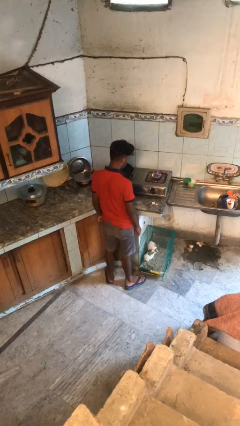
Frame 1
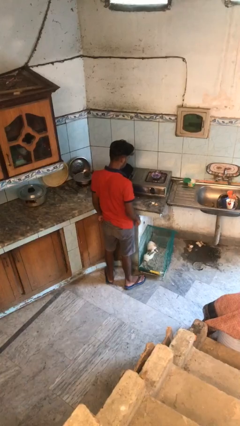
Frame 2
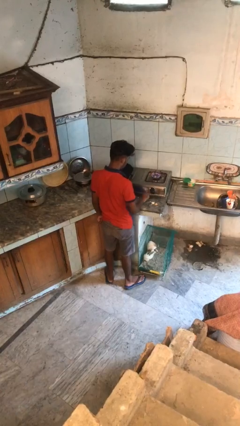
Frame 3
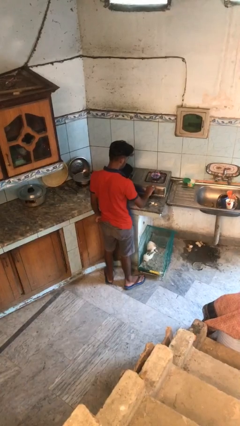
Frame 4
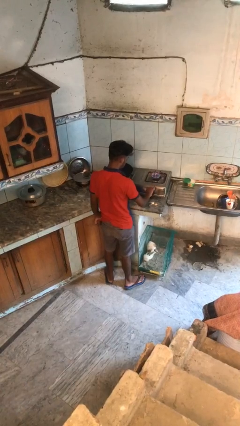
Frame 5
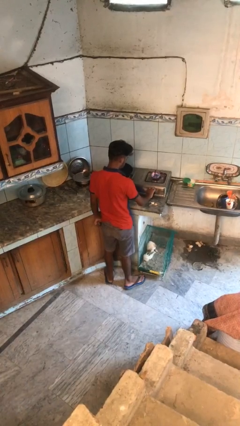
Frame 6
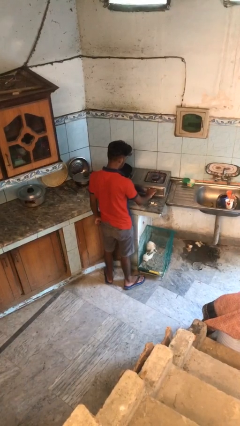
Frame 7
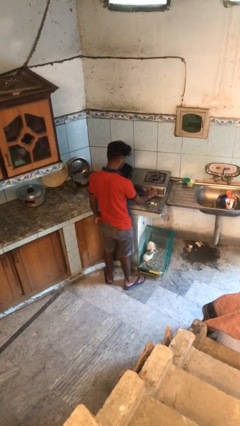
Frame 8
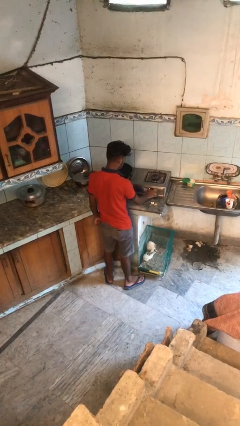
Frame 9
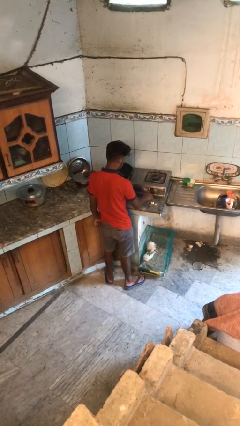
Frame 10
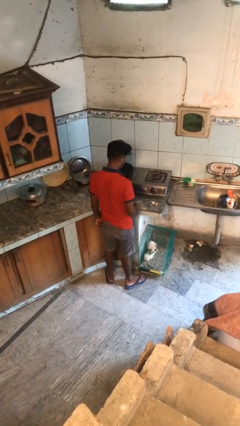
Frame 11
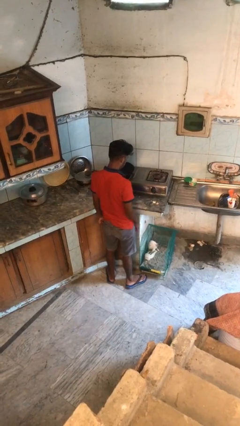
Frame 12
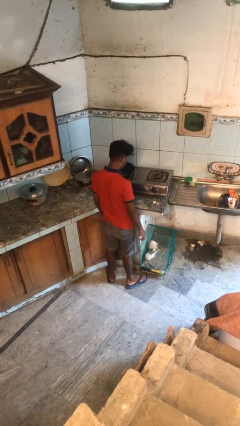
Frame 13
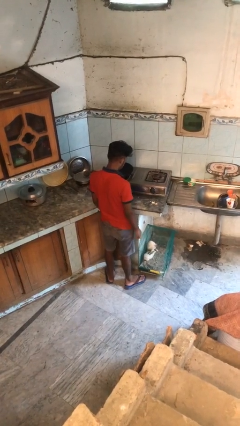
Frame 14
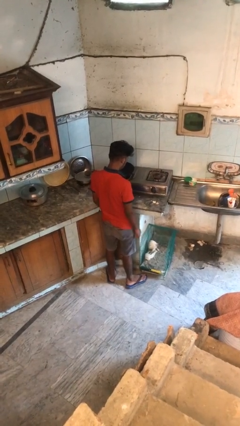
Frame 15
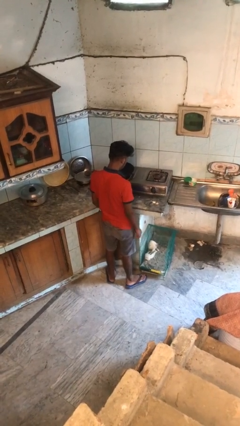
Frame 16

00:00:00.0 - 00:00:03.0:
person turns off stovetop

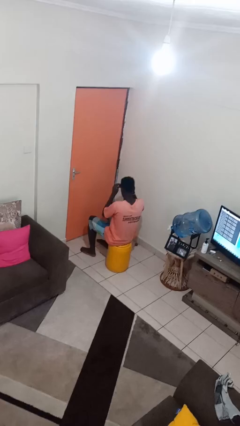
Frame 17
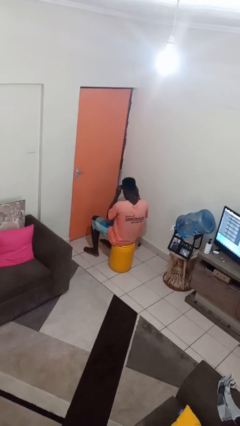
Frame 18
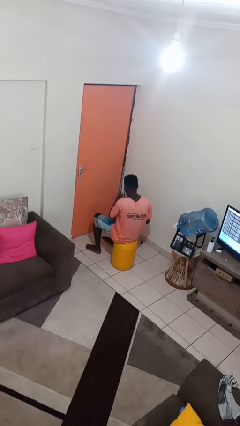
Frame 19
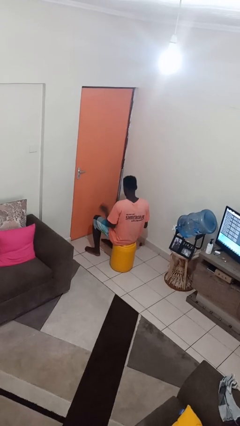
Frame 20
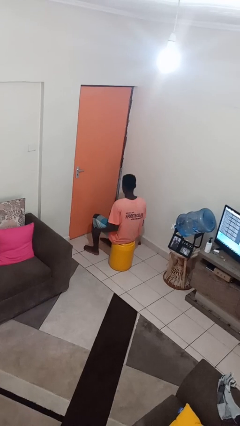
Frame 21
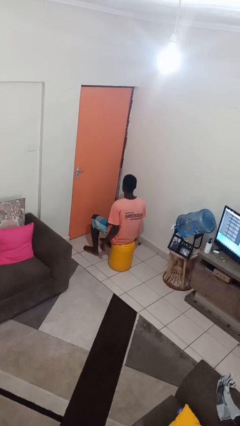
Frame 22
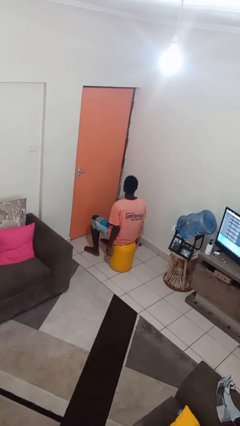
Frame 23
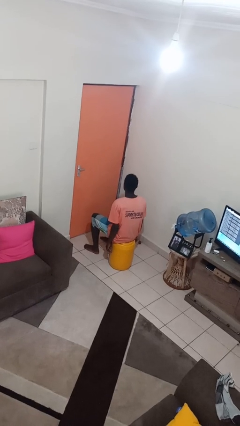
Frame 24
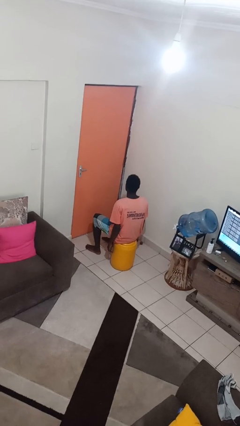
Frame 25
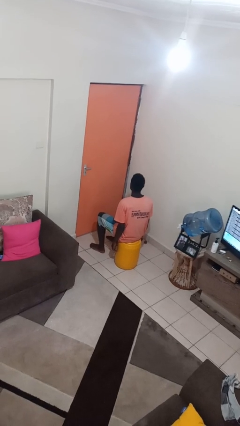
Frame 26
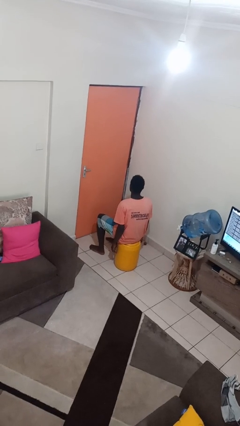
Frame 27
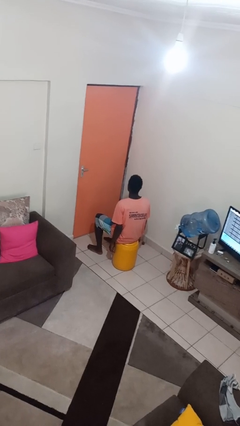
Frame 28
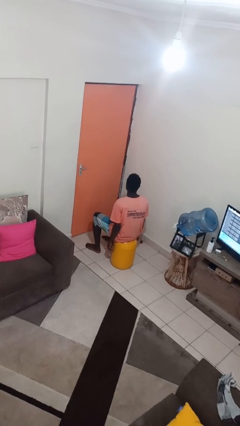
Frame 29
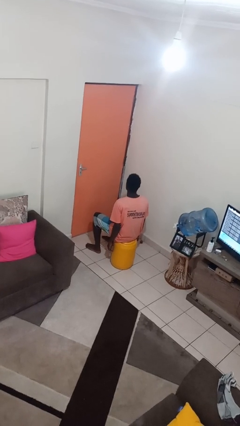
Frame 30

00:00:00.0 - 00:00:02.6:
person takes off sunglasses

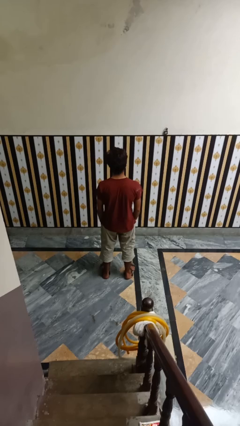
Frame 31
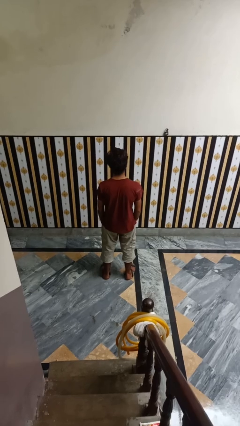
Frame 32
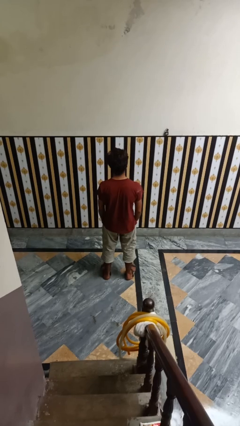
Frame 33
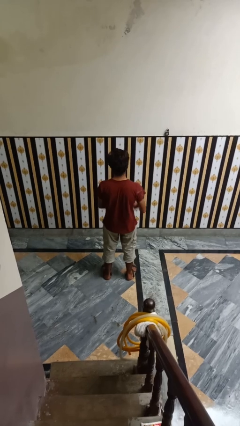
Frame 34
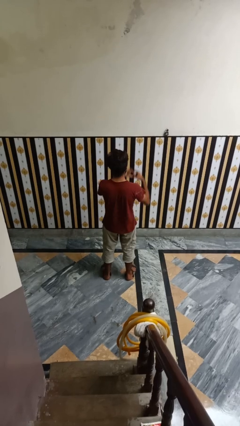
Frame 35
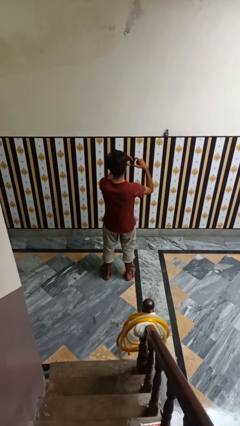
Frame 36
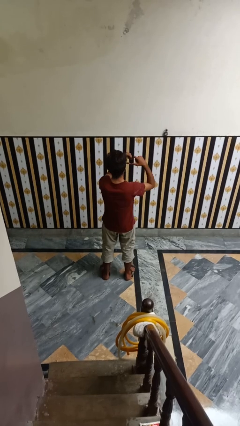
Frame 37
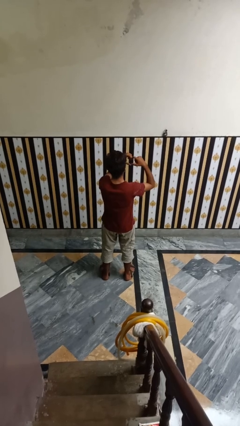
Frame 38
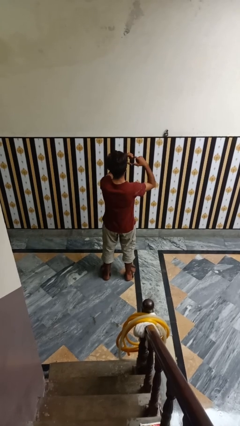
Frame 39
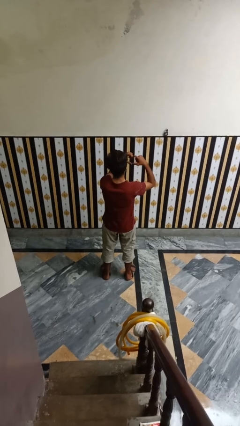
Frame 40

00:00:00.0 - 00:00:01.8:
person gestures heart

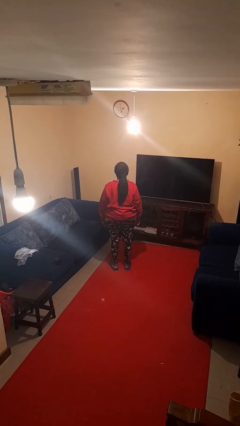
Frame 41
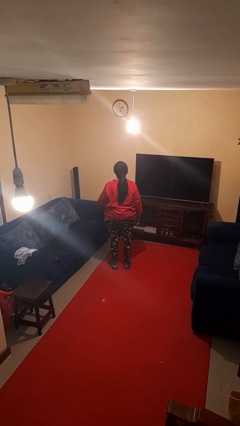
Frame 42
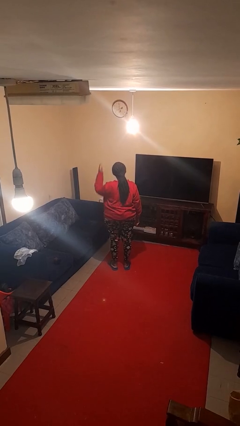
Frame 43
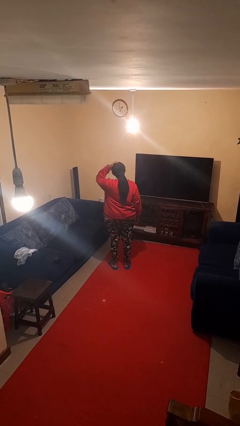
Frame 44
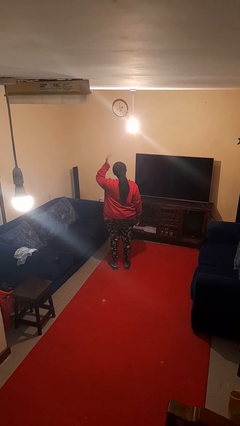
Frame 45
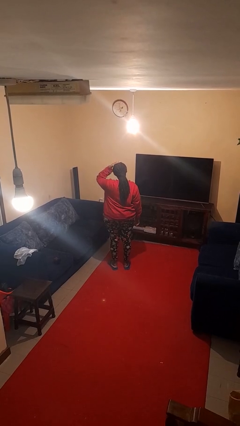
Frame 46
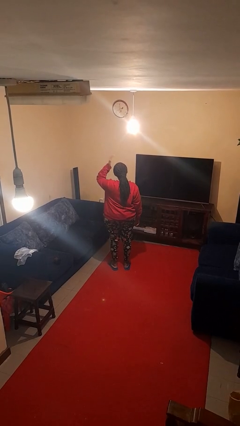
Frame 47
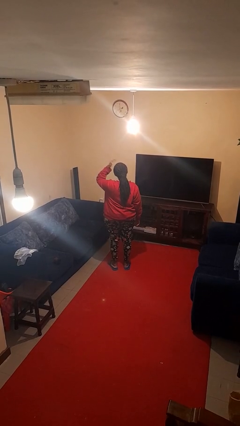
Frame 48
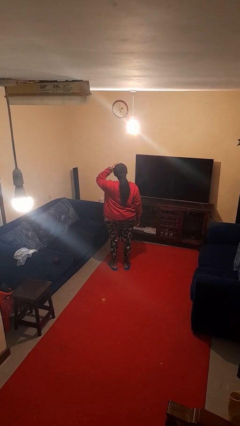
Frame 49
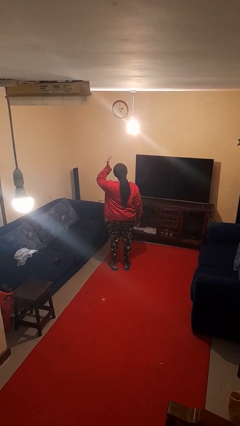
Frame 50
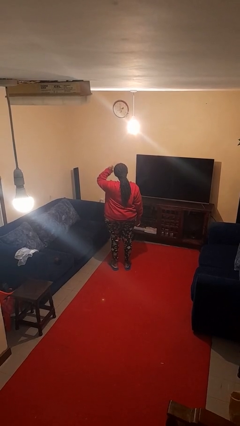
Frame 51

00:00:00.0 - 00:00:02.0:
person pats head

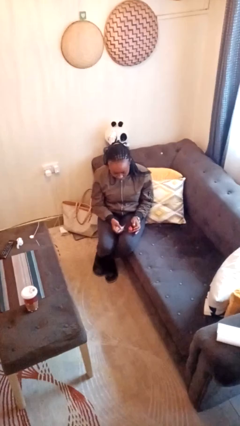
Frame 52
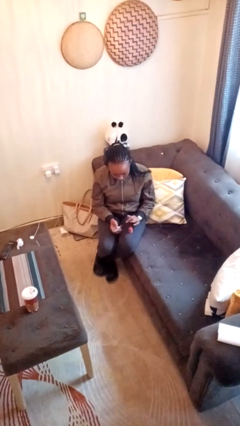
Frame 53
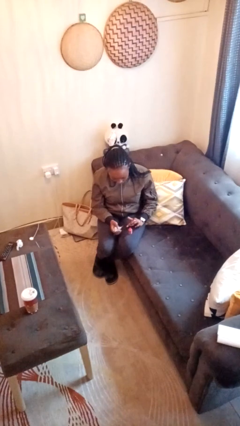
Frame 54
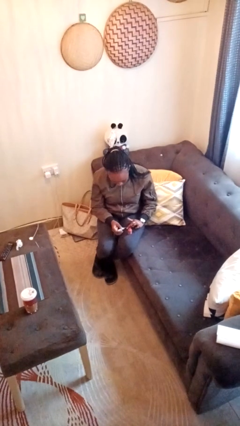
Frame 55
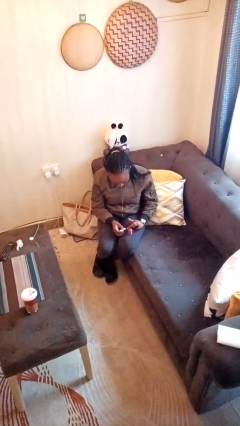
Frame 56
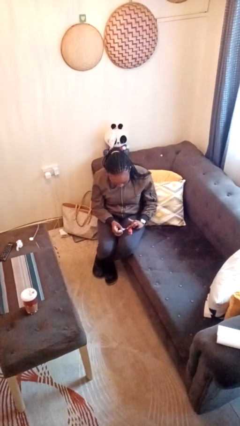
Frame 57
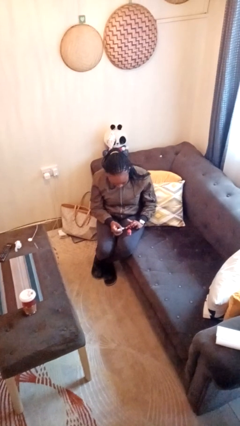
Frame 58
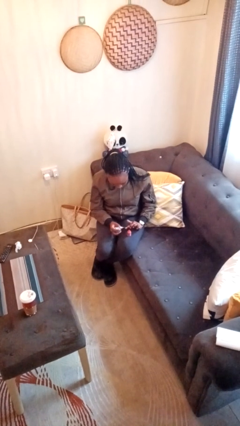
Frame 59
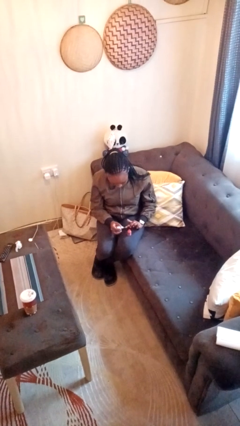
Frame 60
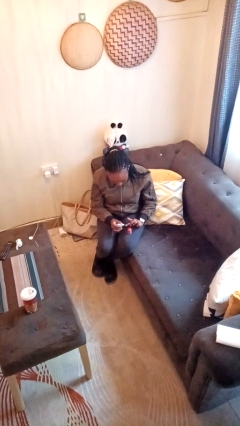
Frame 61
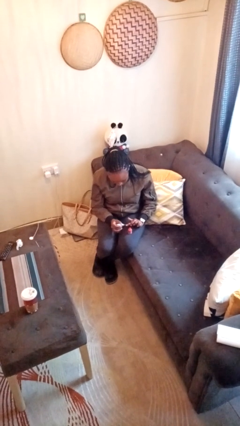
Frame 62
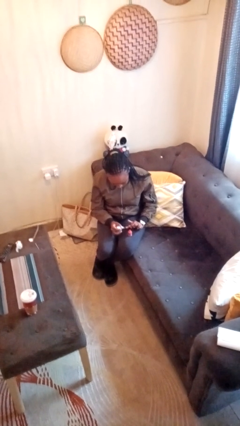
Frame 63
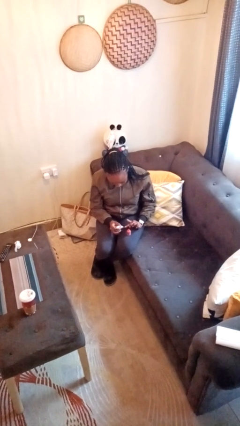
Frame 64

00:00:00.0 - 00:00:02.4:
person paints fingernails

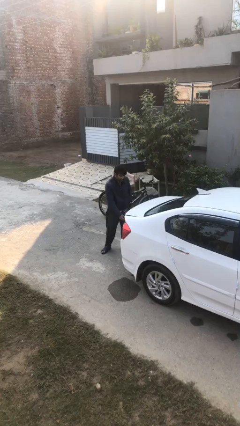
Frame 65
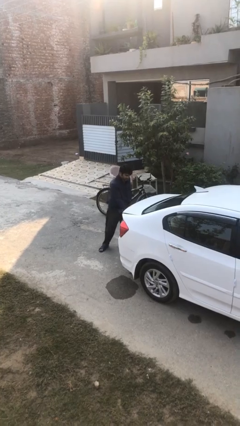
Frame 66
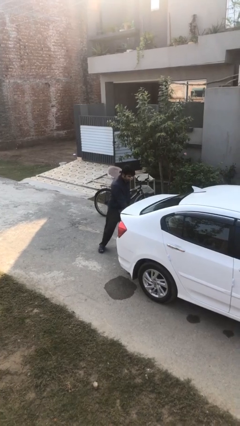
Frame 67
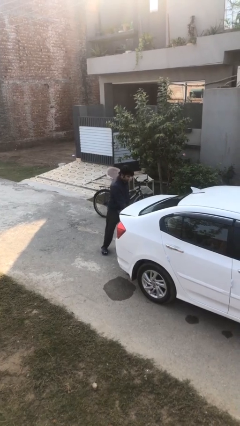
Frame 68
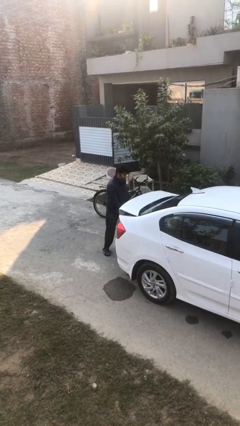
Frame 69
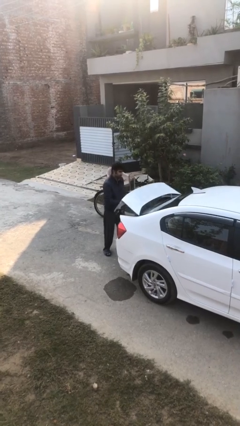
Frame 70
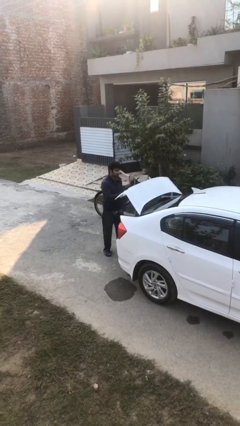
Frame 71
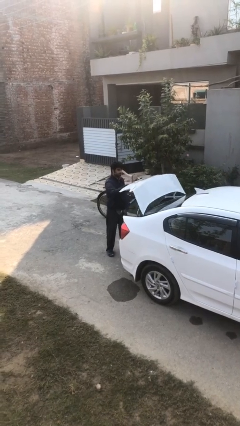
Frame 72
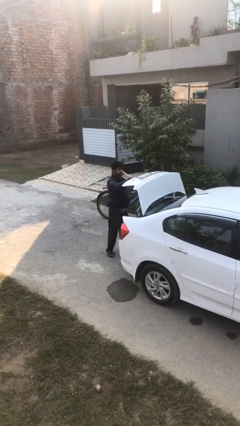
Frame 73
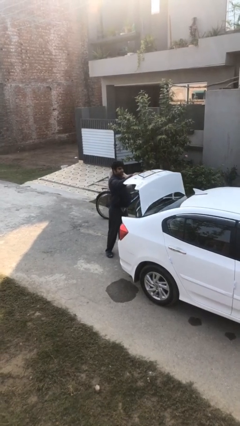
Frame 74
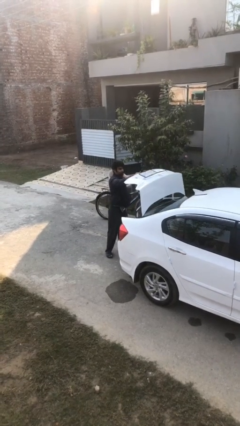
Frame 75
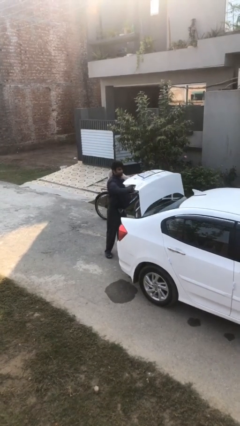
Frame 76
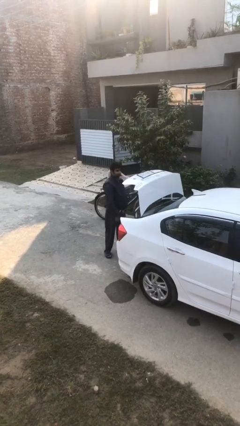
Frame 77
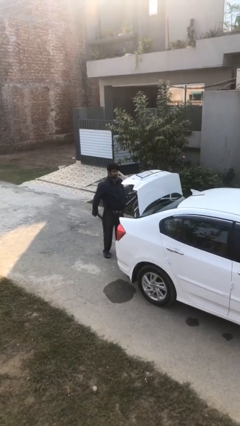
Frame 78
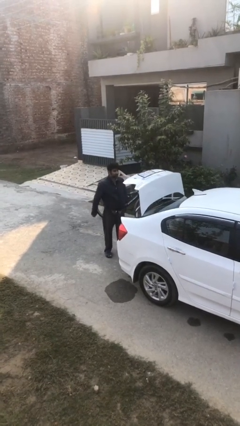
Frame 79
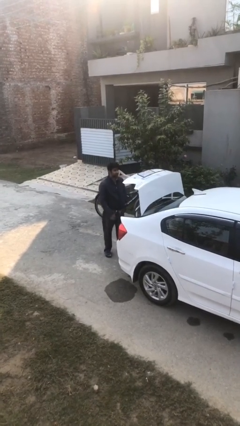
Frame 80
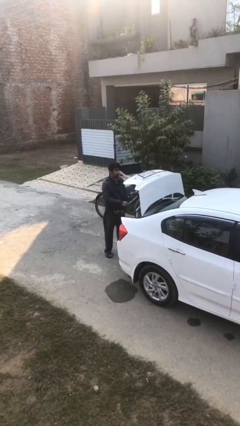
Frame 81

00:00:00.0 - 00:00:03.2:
person opens car trunk

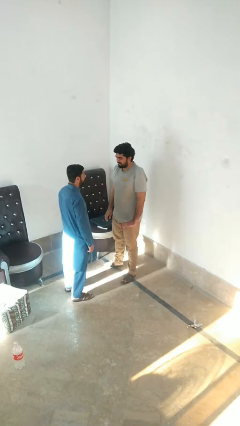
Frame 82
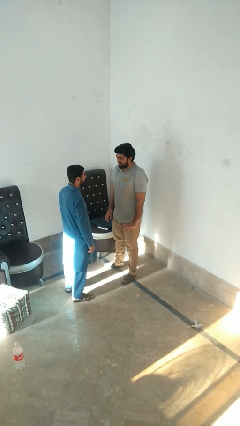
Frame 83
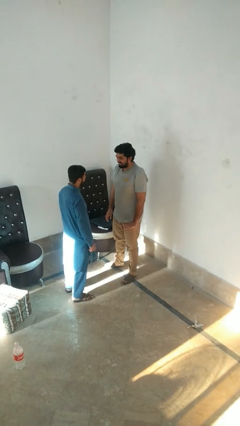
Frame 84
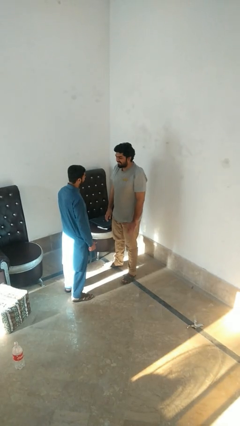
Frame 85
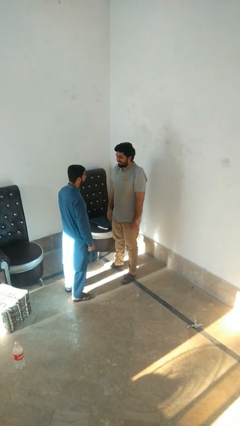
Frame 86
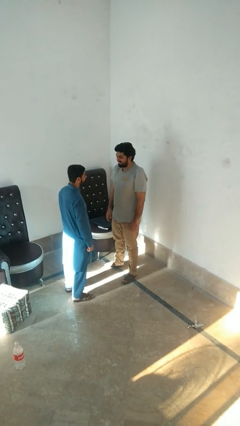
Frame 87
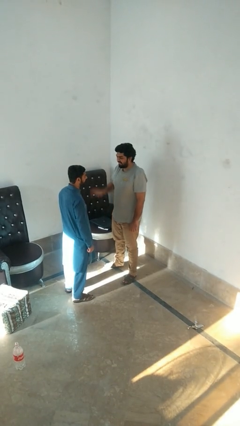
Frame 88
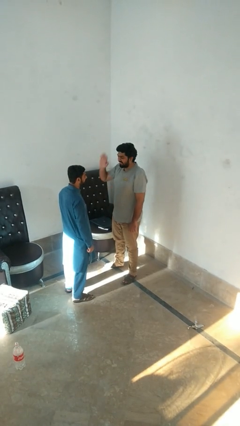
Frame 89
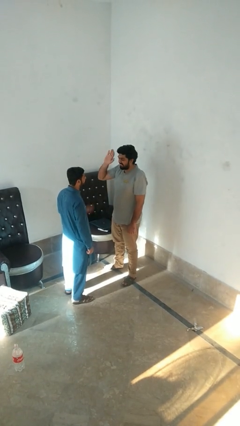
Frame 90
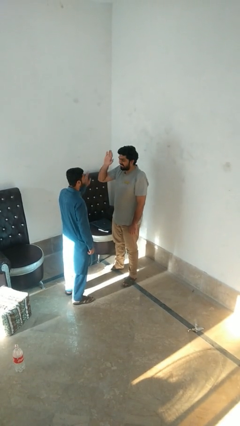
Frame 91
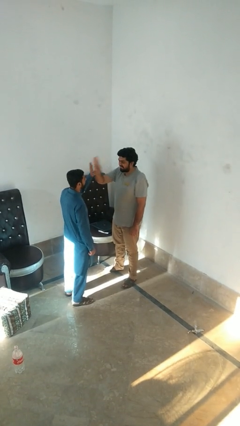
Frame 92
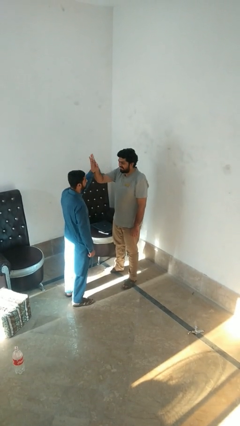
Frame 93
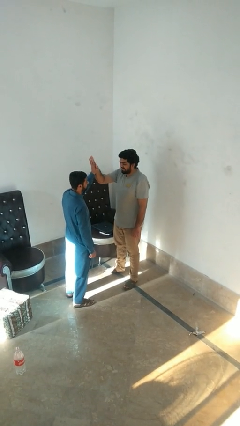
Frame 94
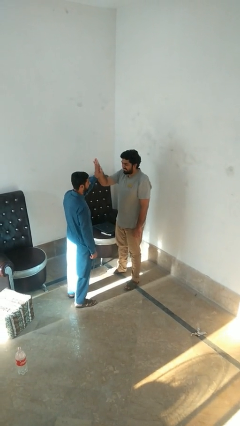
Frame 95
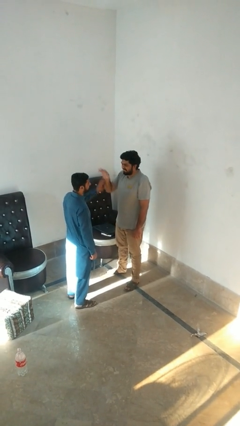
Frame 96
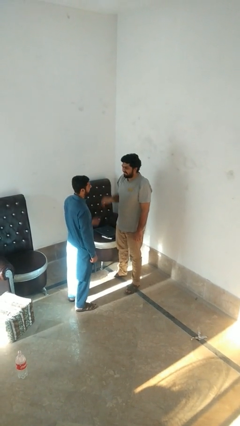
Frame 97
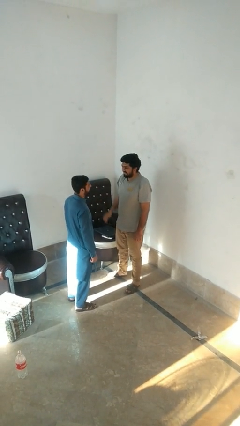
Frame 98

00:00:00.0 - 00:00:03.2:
person highfives hand
